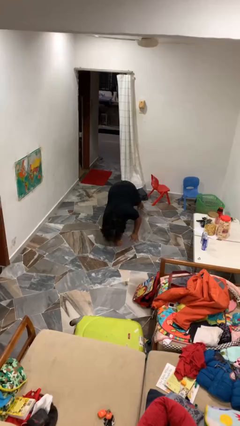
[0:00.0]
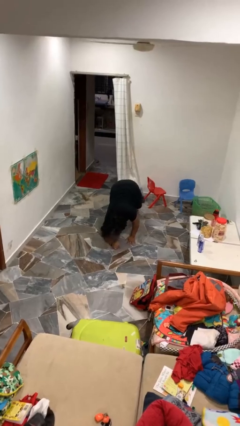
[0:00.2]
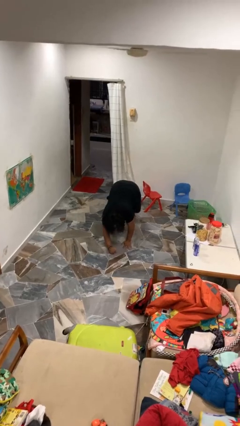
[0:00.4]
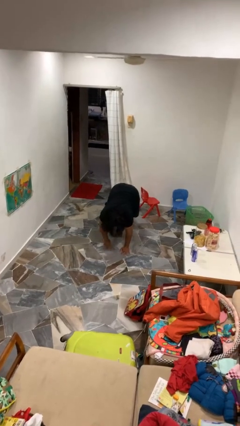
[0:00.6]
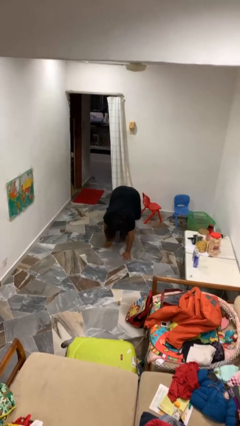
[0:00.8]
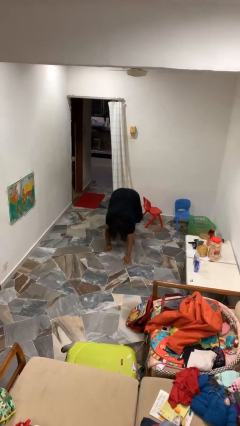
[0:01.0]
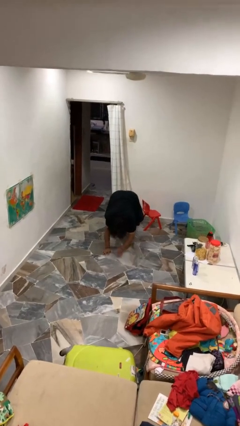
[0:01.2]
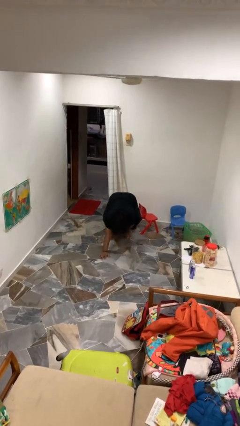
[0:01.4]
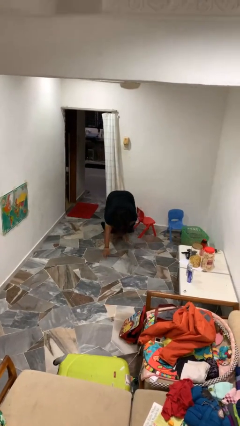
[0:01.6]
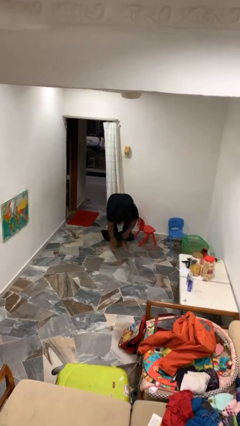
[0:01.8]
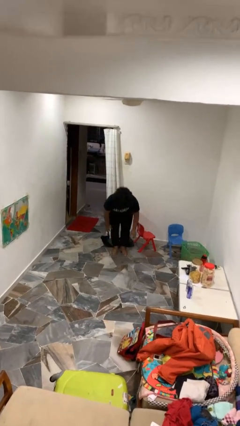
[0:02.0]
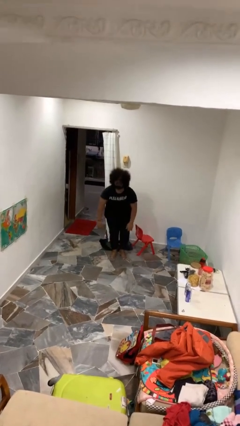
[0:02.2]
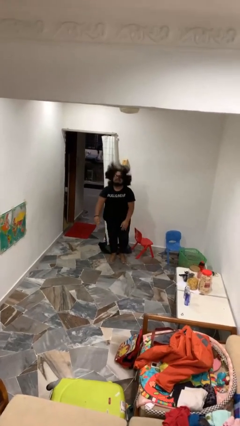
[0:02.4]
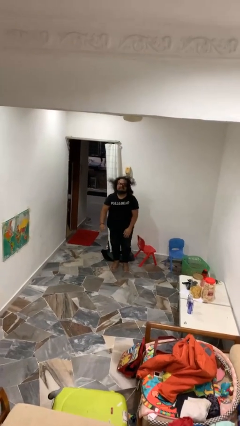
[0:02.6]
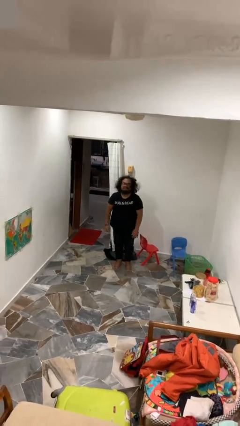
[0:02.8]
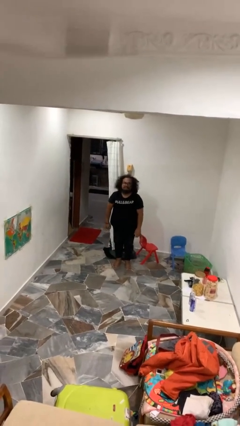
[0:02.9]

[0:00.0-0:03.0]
person stands up from floor

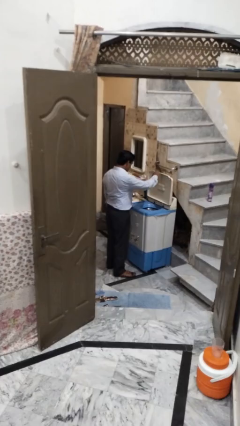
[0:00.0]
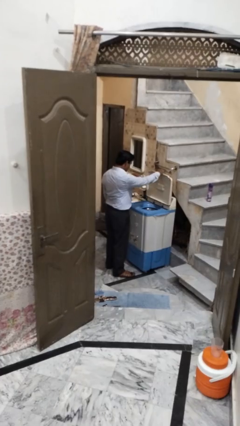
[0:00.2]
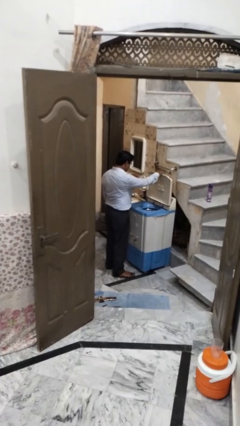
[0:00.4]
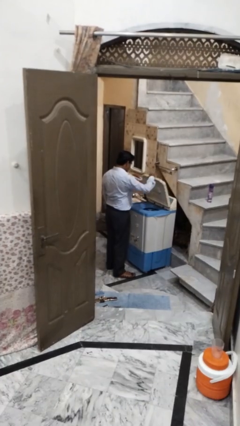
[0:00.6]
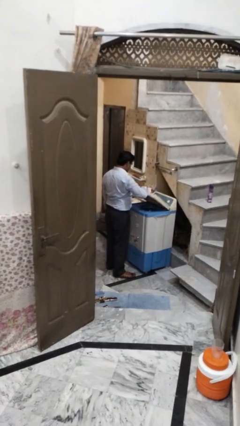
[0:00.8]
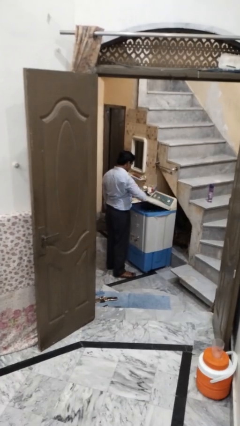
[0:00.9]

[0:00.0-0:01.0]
person closes clothes washer

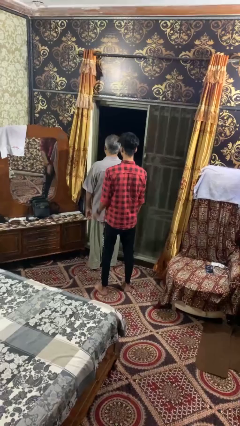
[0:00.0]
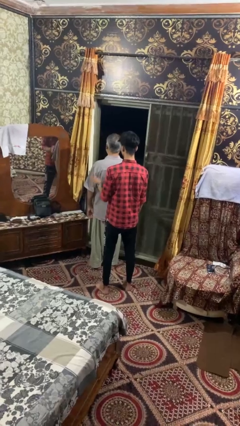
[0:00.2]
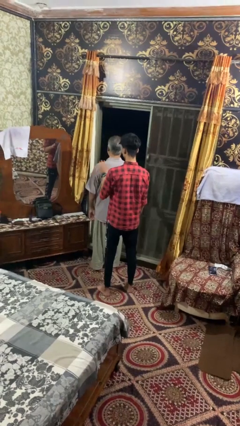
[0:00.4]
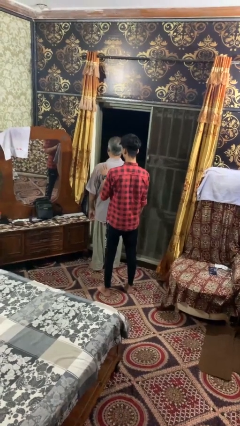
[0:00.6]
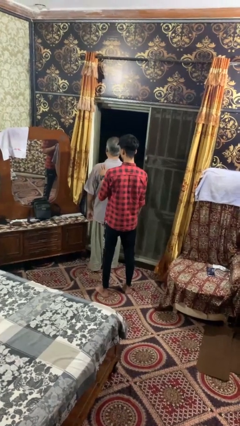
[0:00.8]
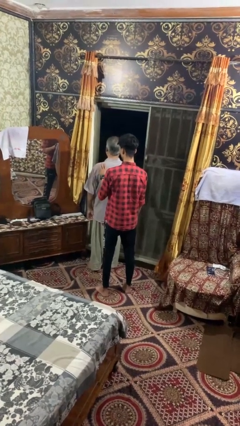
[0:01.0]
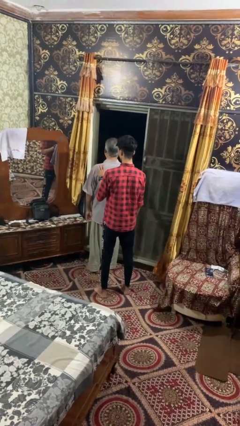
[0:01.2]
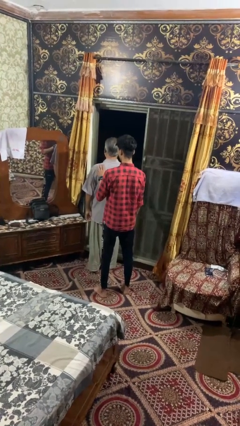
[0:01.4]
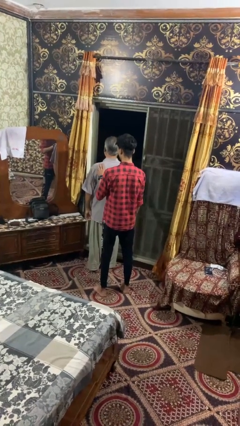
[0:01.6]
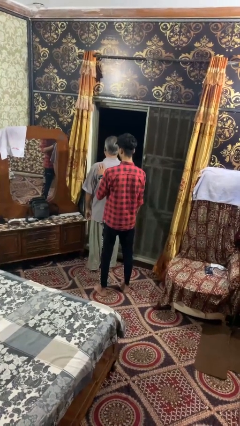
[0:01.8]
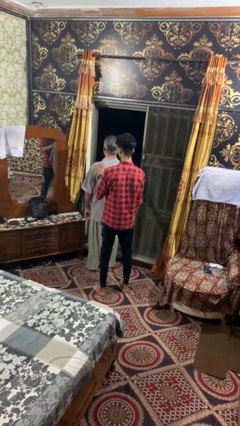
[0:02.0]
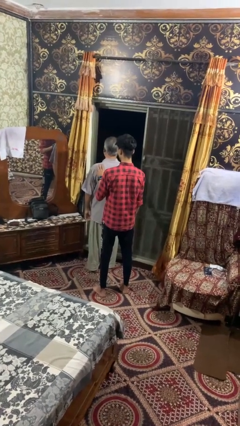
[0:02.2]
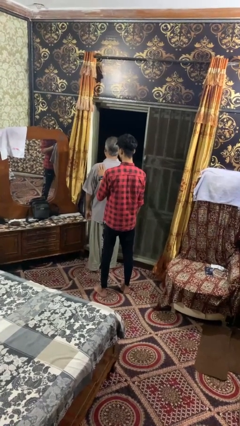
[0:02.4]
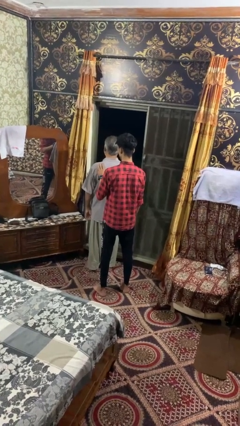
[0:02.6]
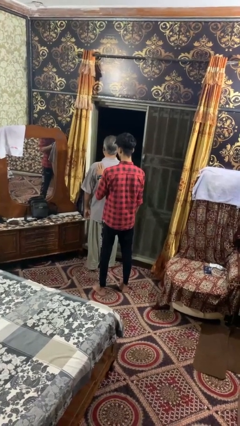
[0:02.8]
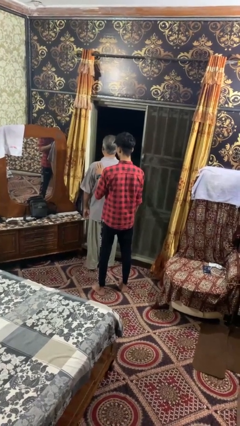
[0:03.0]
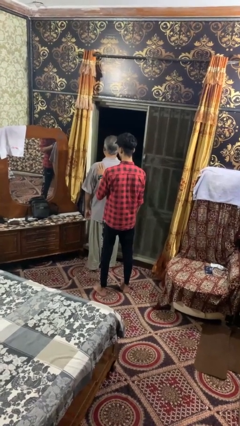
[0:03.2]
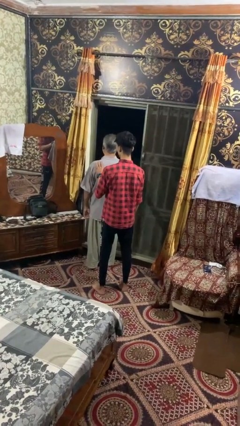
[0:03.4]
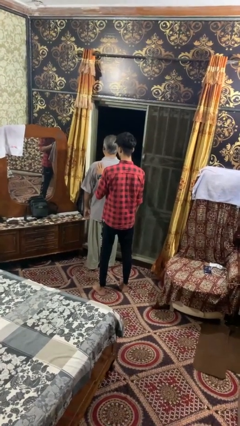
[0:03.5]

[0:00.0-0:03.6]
person touches back of person

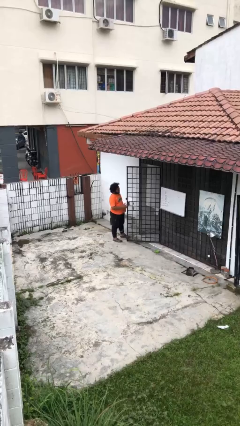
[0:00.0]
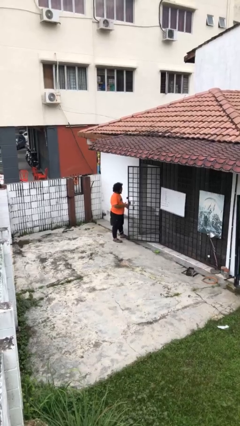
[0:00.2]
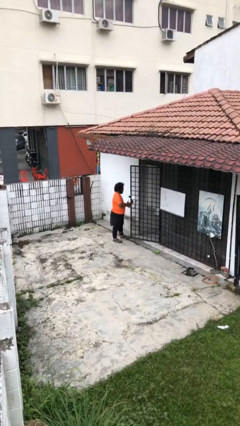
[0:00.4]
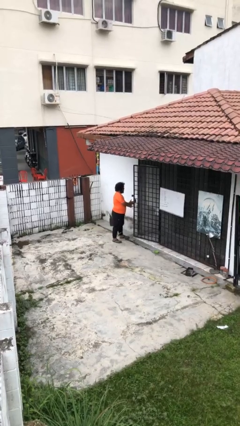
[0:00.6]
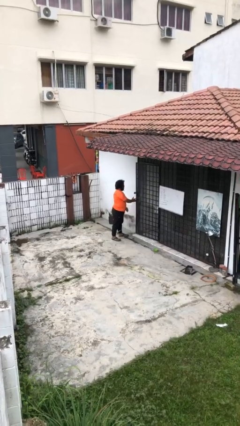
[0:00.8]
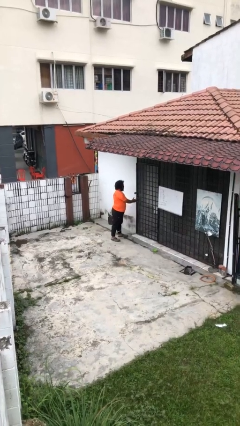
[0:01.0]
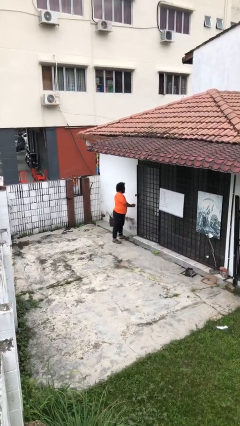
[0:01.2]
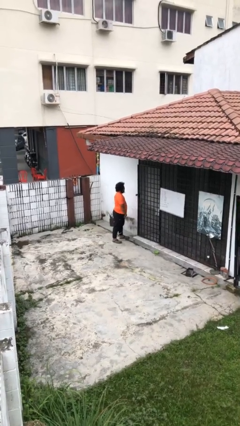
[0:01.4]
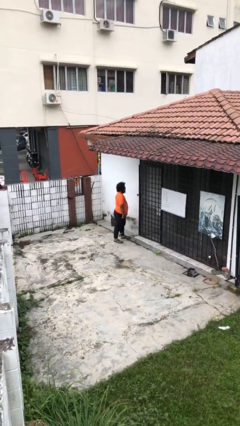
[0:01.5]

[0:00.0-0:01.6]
person closes facility door

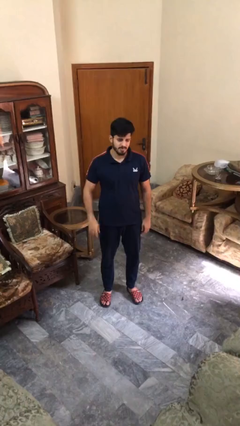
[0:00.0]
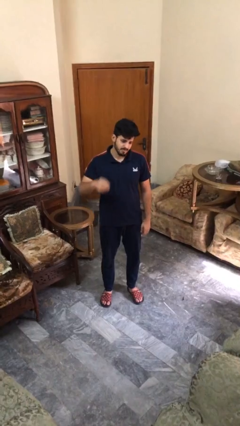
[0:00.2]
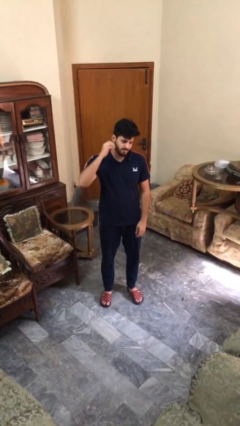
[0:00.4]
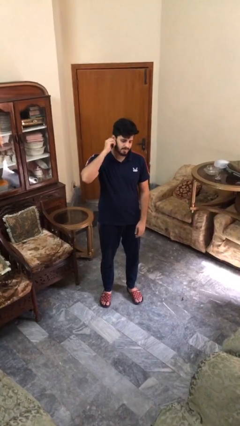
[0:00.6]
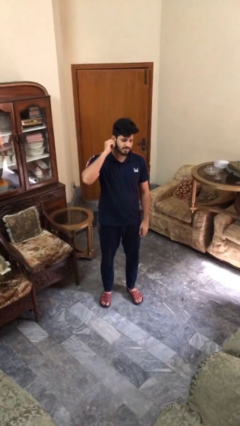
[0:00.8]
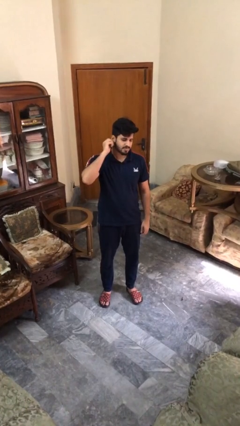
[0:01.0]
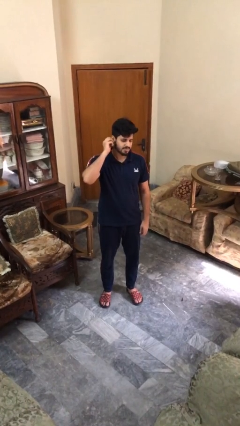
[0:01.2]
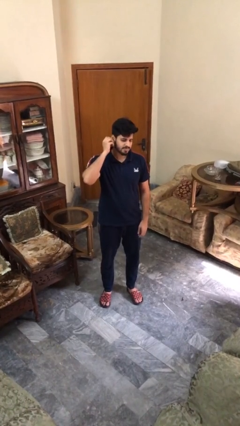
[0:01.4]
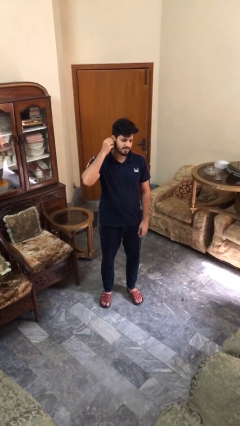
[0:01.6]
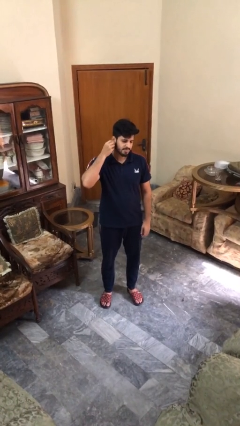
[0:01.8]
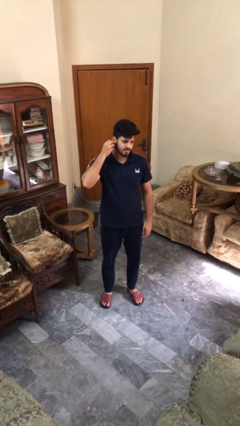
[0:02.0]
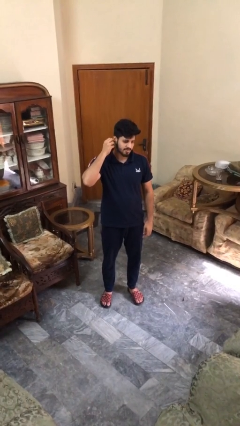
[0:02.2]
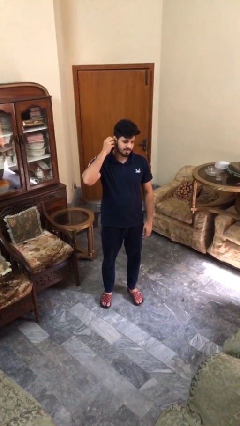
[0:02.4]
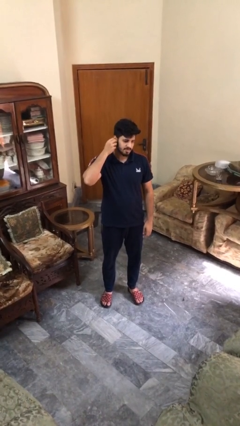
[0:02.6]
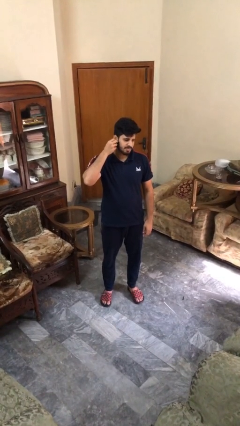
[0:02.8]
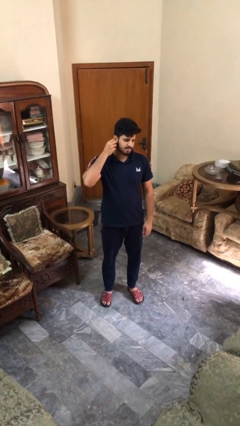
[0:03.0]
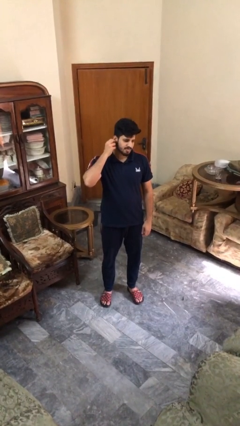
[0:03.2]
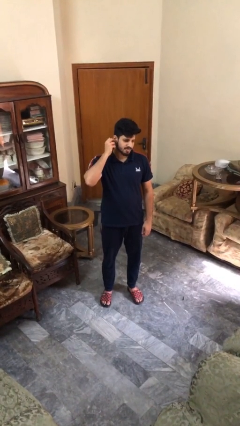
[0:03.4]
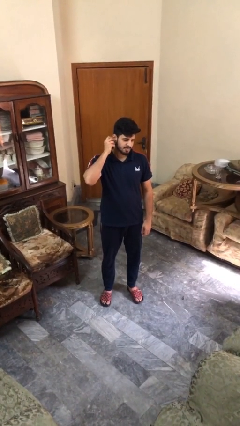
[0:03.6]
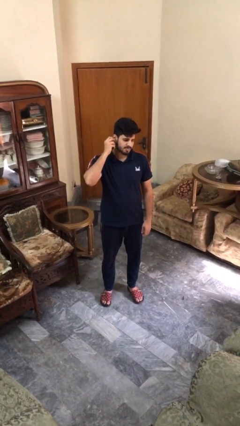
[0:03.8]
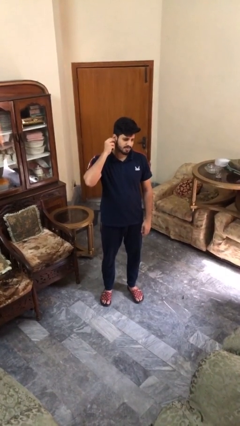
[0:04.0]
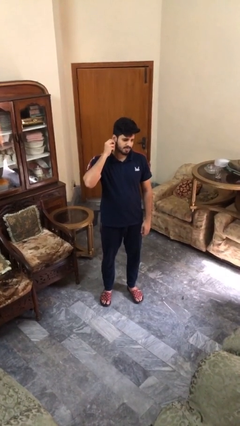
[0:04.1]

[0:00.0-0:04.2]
person touches earlobe

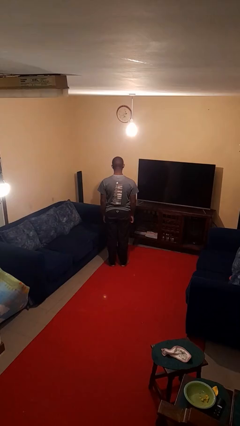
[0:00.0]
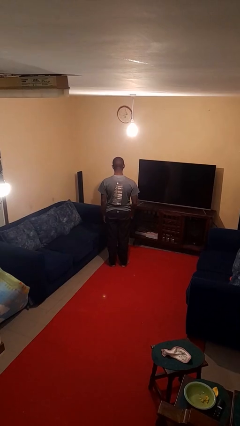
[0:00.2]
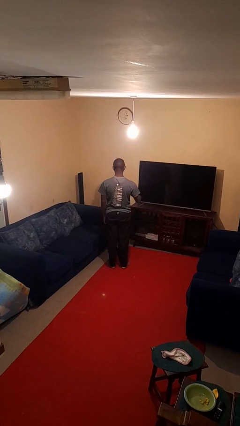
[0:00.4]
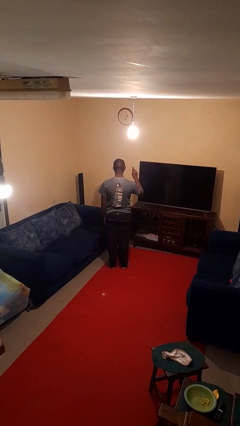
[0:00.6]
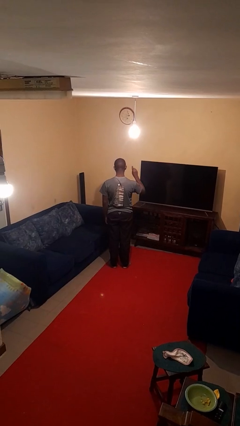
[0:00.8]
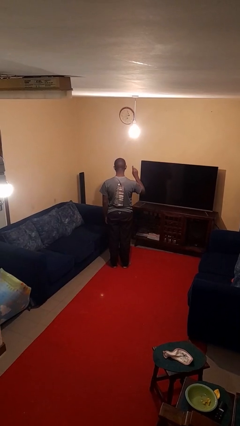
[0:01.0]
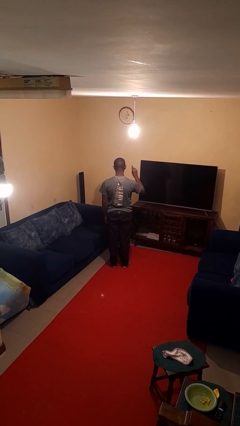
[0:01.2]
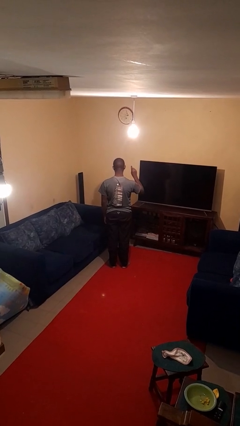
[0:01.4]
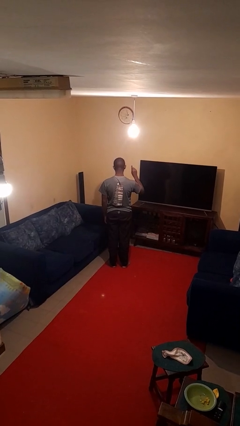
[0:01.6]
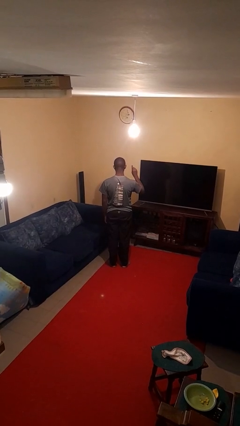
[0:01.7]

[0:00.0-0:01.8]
person gestures number one

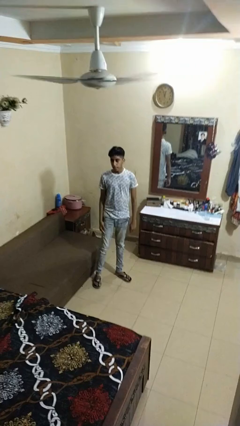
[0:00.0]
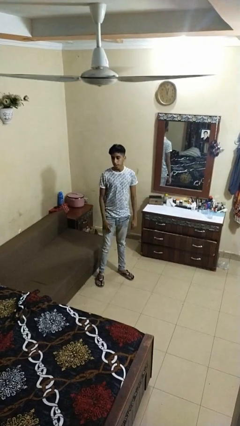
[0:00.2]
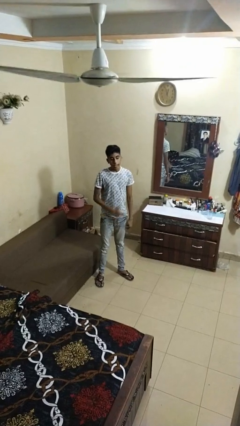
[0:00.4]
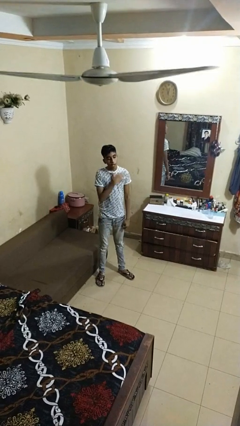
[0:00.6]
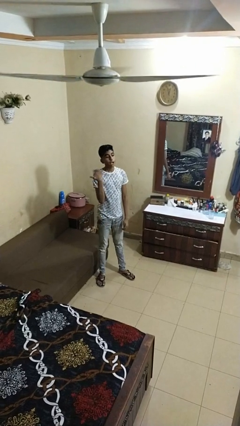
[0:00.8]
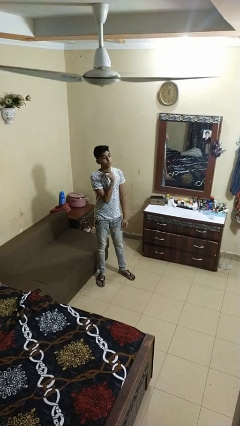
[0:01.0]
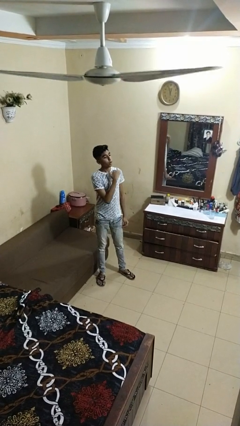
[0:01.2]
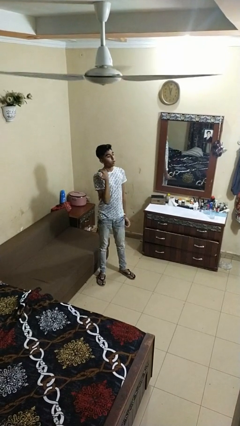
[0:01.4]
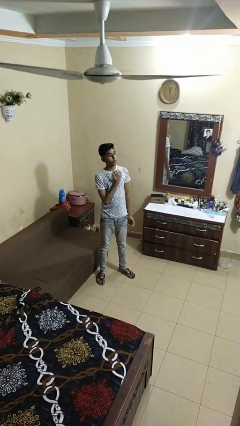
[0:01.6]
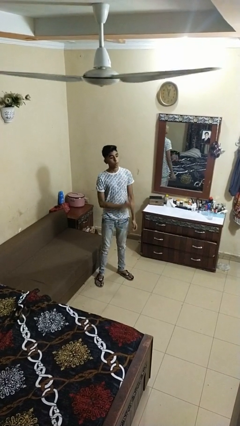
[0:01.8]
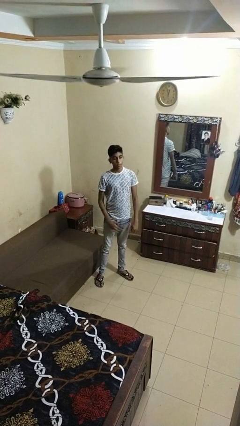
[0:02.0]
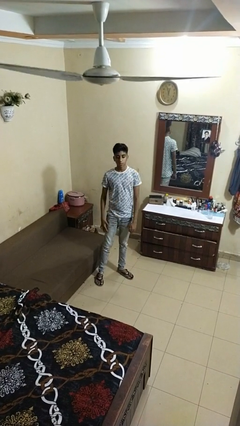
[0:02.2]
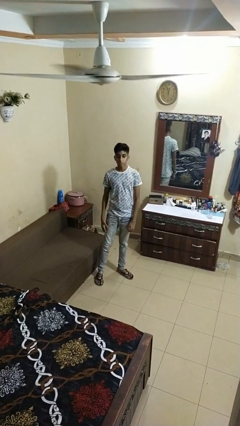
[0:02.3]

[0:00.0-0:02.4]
person gestures cut
